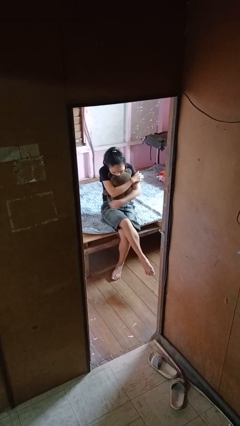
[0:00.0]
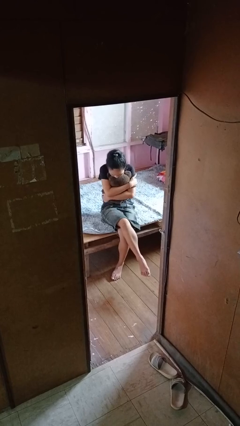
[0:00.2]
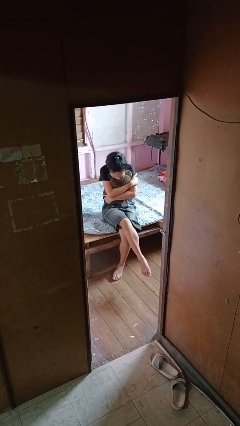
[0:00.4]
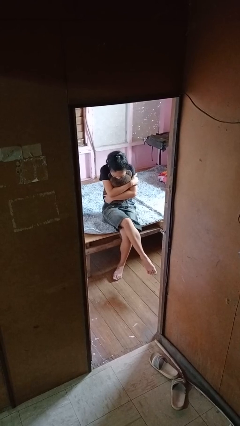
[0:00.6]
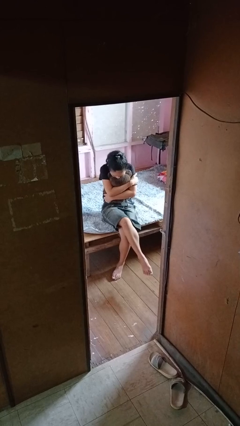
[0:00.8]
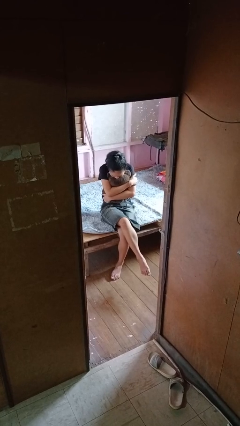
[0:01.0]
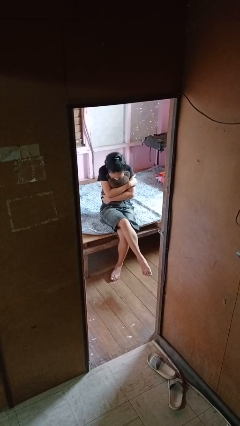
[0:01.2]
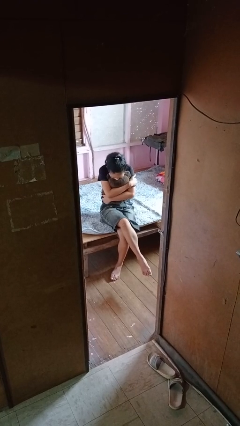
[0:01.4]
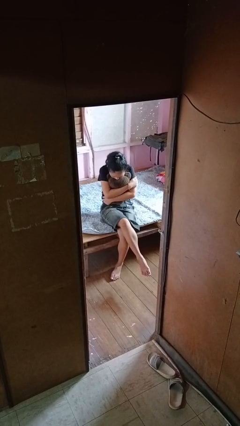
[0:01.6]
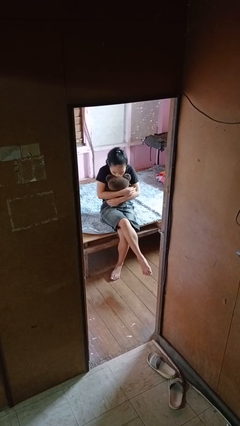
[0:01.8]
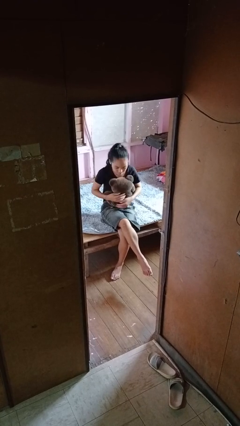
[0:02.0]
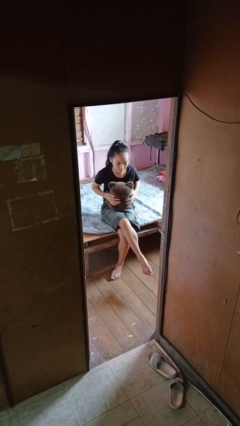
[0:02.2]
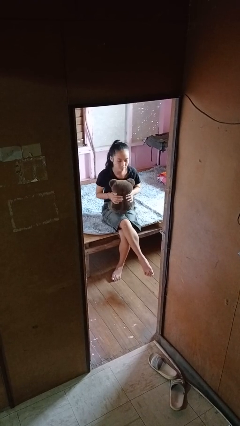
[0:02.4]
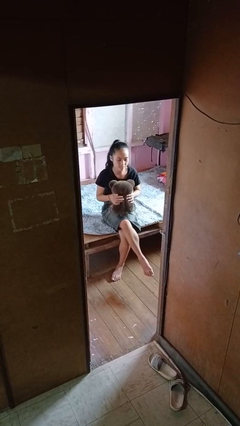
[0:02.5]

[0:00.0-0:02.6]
person hugs stuffed animal

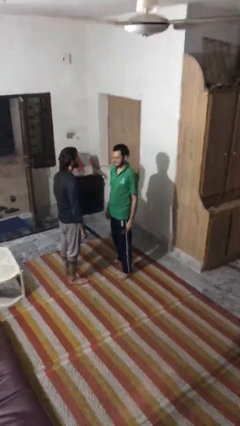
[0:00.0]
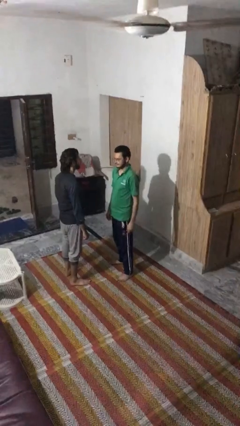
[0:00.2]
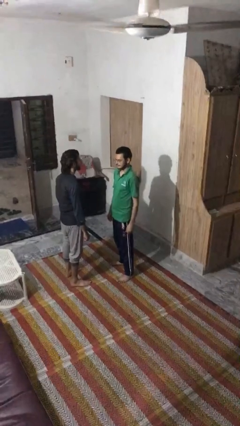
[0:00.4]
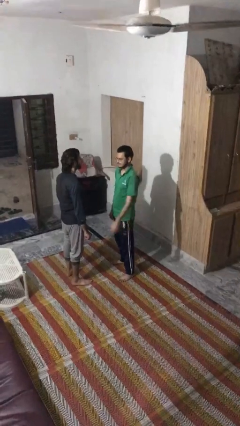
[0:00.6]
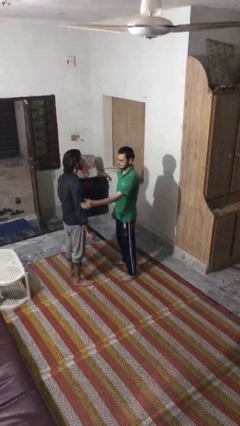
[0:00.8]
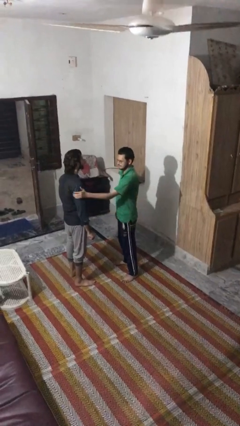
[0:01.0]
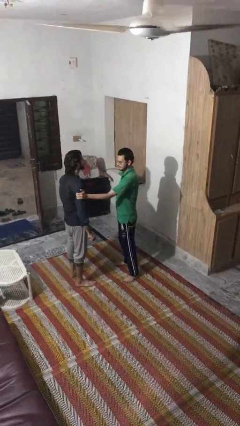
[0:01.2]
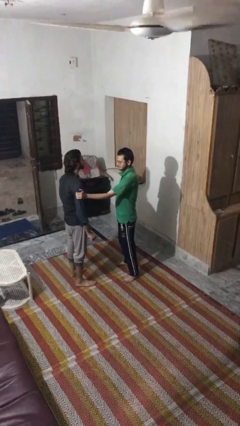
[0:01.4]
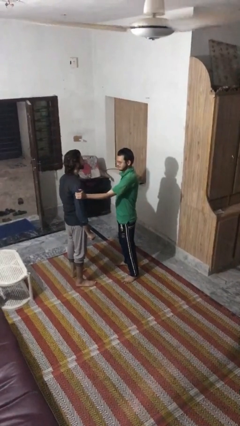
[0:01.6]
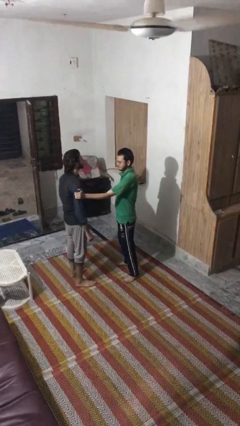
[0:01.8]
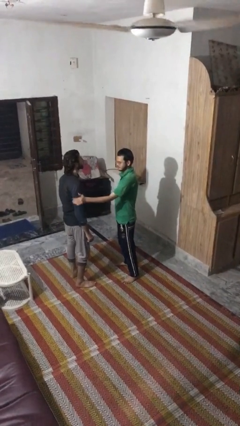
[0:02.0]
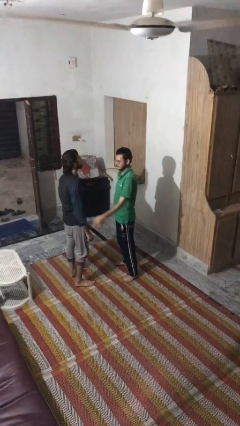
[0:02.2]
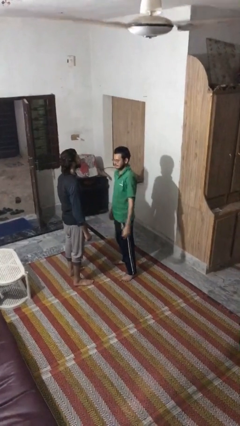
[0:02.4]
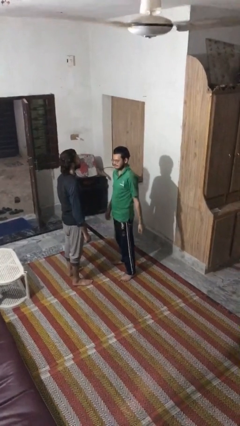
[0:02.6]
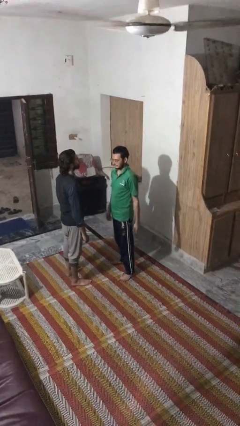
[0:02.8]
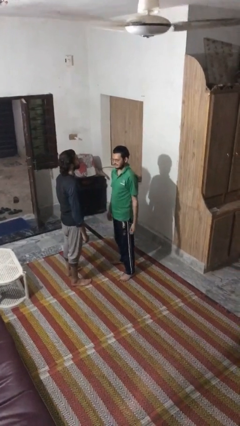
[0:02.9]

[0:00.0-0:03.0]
person grabs person by bicep

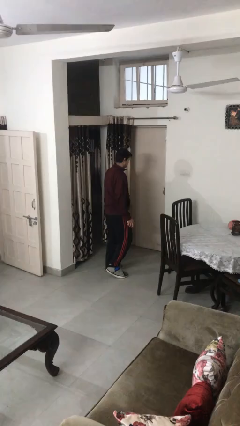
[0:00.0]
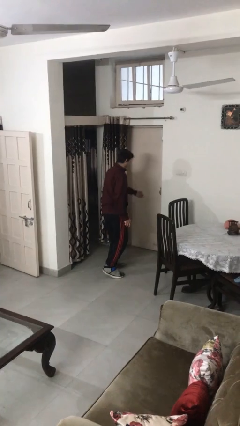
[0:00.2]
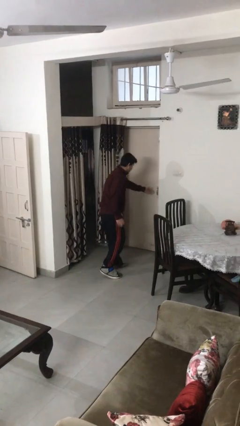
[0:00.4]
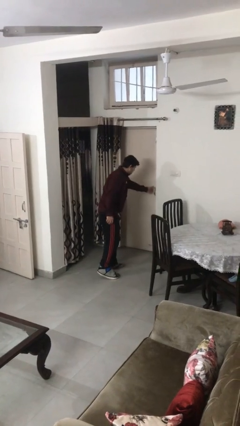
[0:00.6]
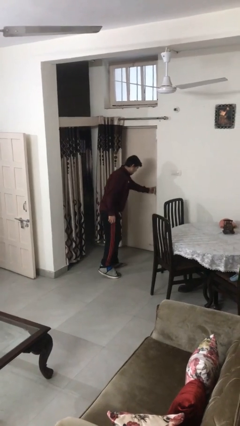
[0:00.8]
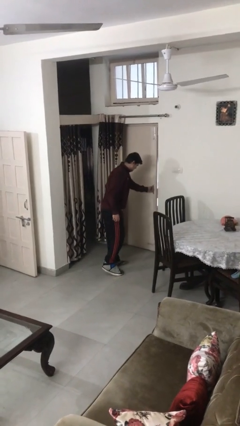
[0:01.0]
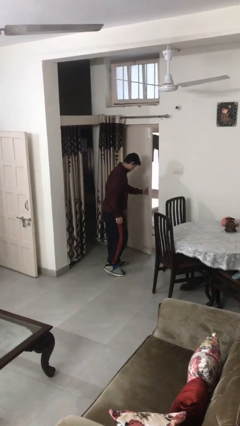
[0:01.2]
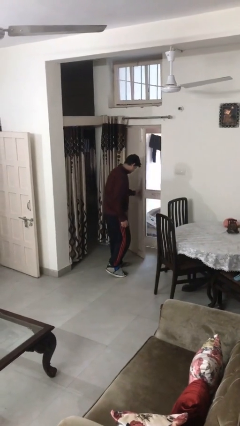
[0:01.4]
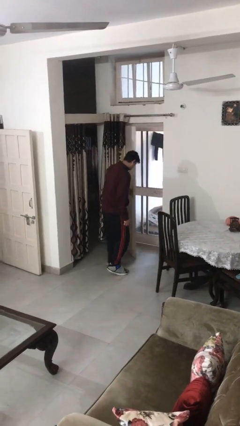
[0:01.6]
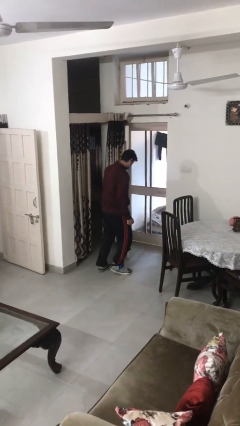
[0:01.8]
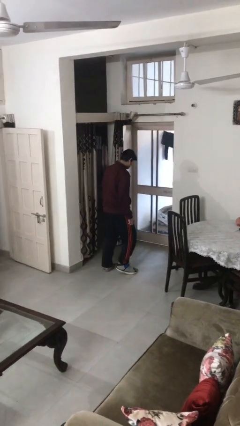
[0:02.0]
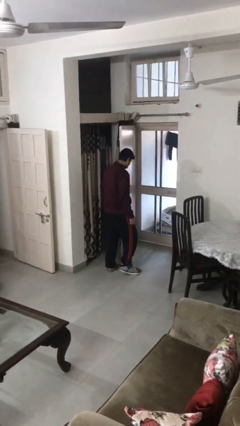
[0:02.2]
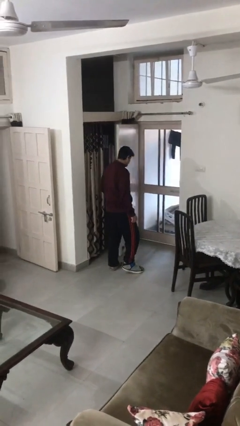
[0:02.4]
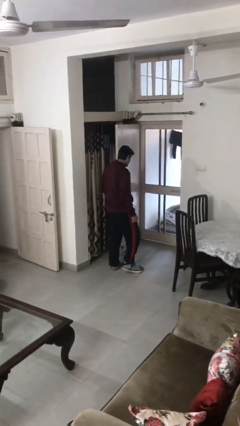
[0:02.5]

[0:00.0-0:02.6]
person opens facility door

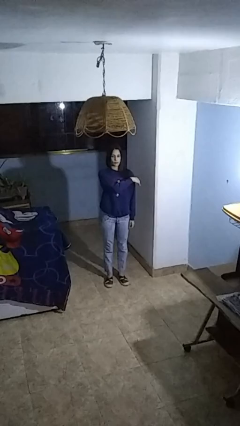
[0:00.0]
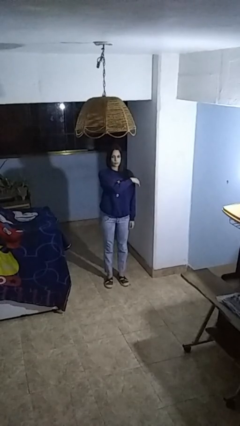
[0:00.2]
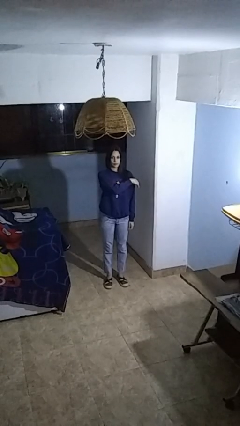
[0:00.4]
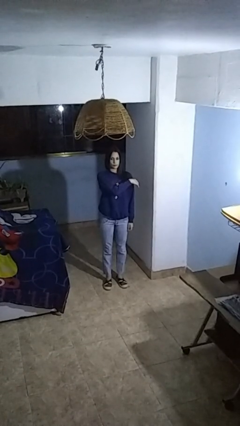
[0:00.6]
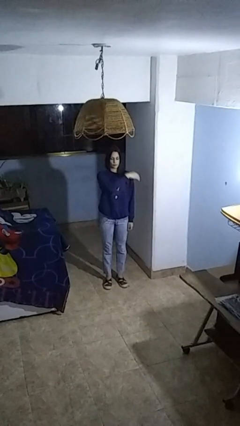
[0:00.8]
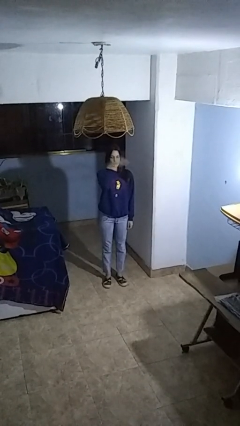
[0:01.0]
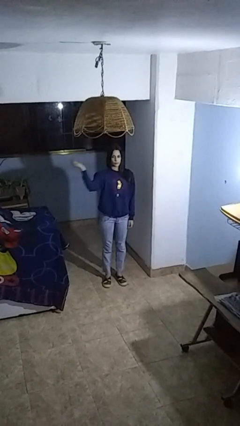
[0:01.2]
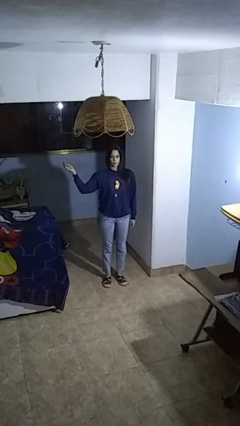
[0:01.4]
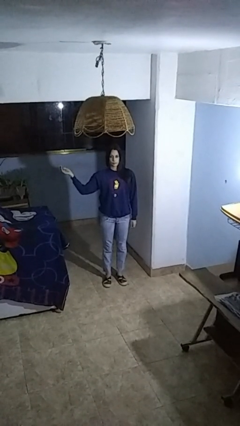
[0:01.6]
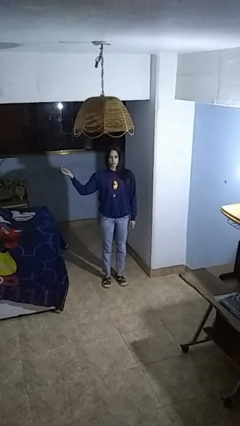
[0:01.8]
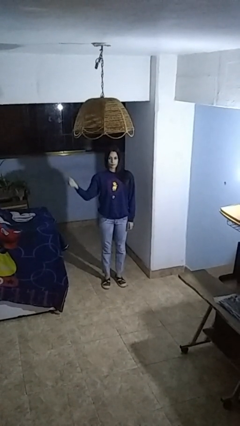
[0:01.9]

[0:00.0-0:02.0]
person gestures swipe right

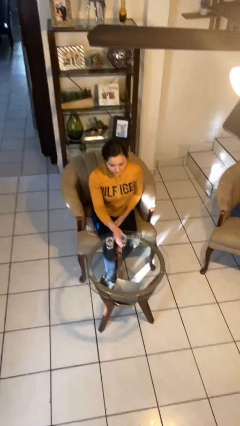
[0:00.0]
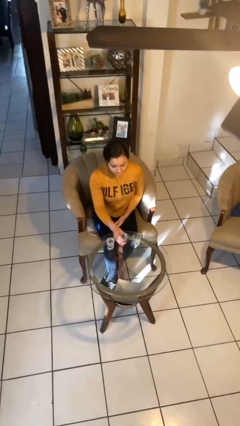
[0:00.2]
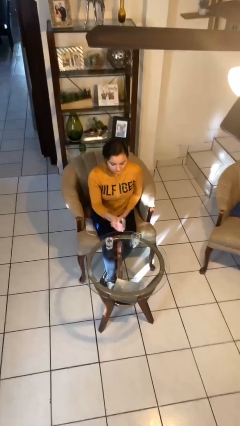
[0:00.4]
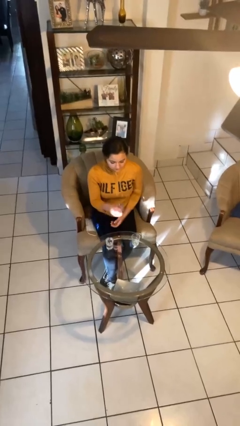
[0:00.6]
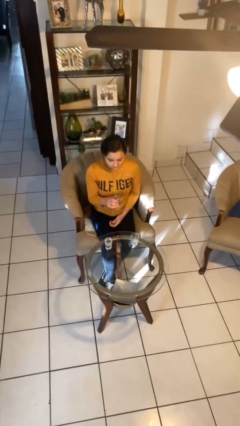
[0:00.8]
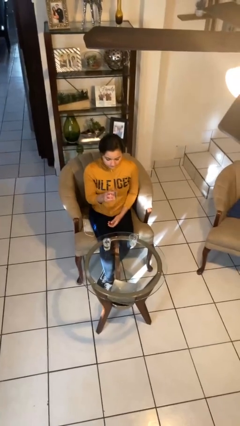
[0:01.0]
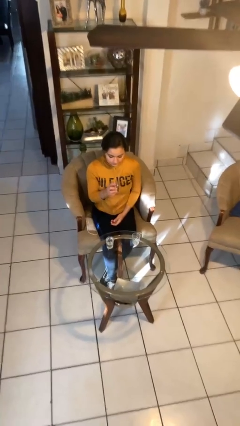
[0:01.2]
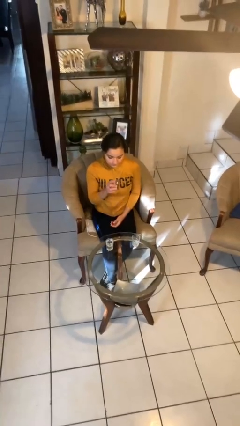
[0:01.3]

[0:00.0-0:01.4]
person picks up object from table

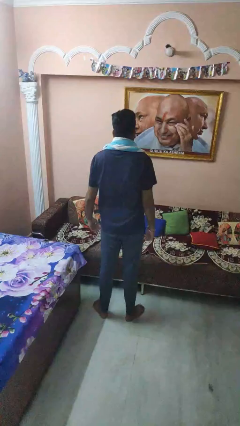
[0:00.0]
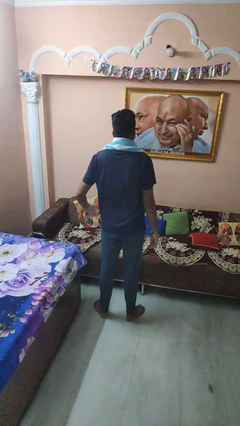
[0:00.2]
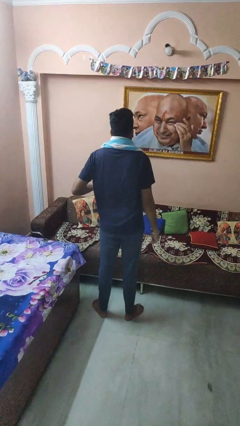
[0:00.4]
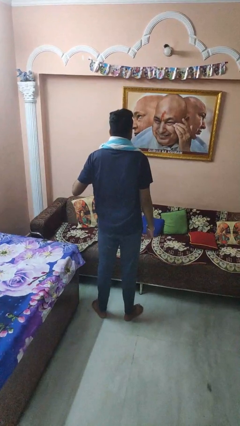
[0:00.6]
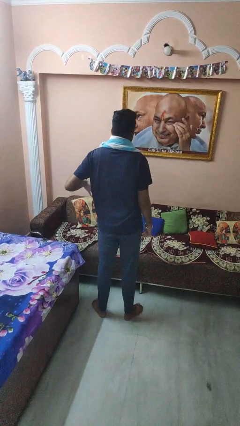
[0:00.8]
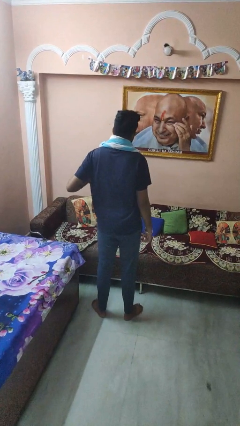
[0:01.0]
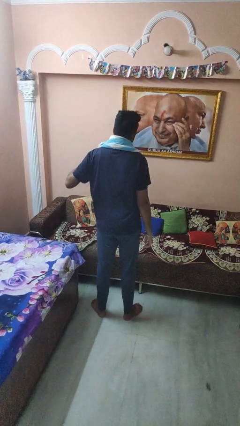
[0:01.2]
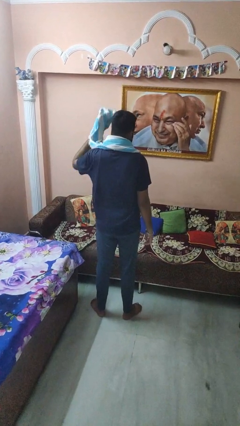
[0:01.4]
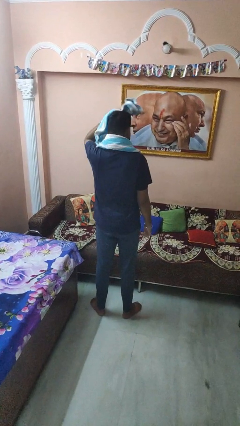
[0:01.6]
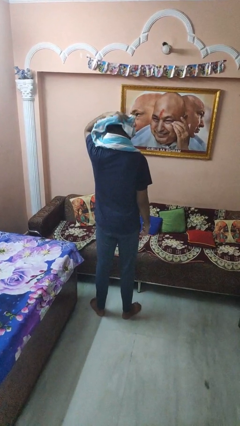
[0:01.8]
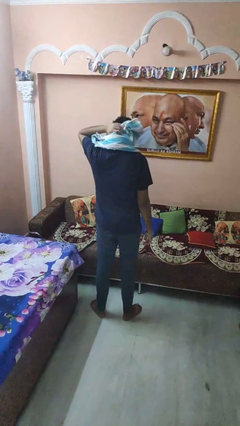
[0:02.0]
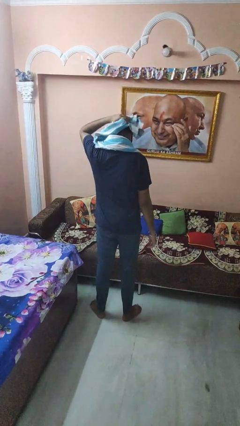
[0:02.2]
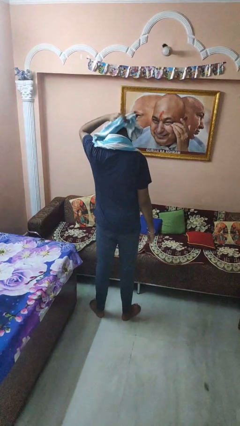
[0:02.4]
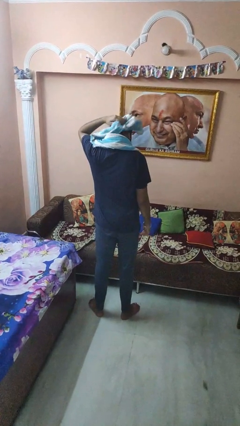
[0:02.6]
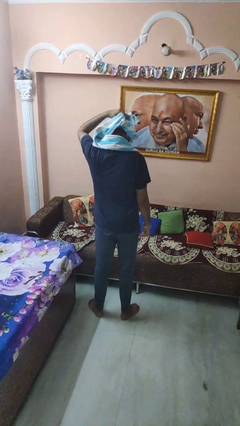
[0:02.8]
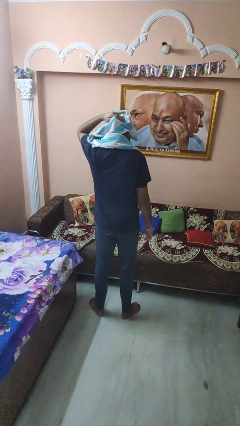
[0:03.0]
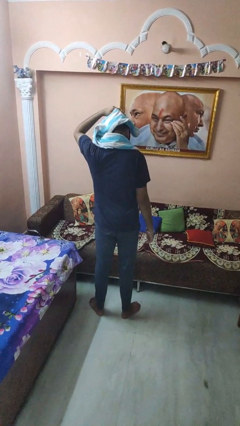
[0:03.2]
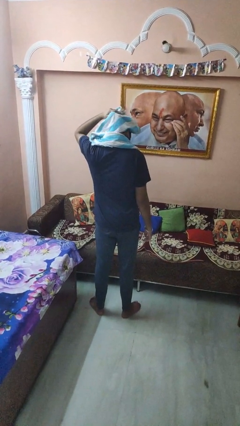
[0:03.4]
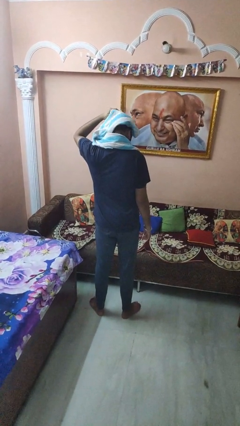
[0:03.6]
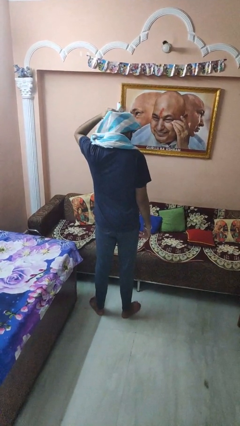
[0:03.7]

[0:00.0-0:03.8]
person dries hair with towel

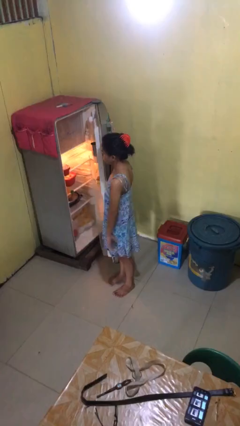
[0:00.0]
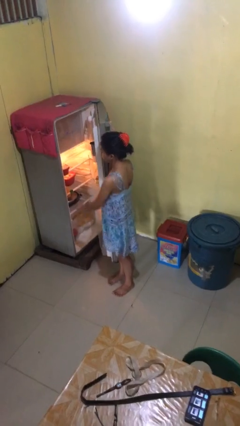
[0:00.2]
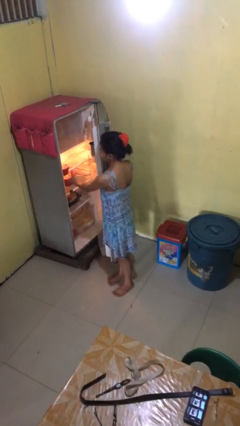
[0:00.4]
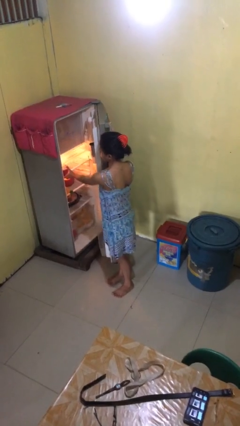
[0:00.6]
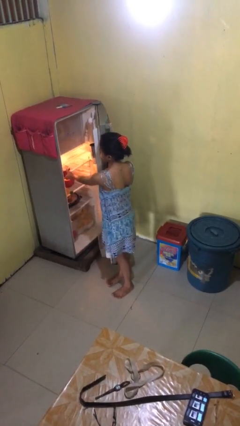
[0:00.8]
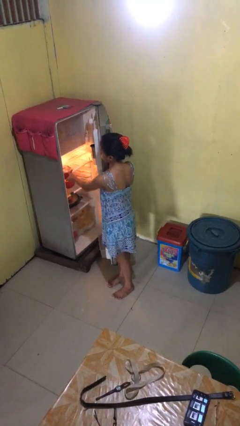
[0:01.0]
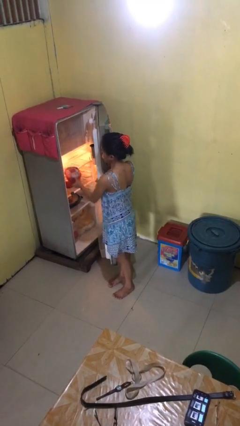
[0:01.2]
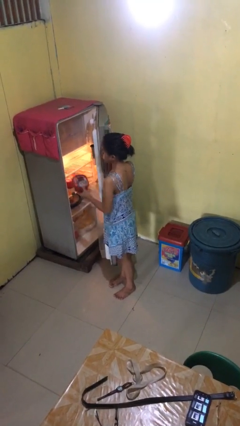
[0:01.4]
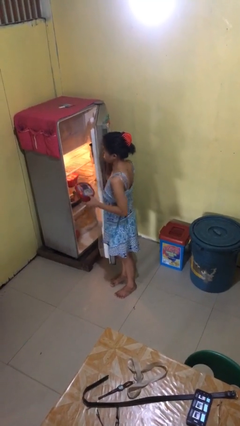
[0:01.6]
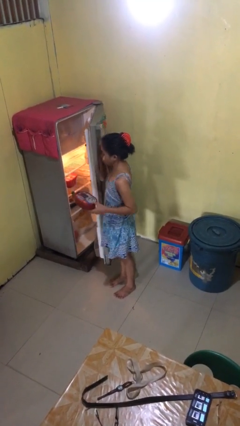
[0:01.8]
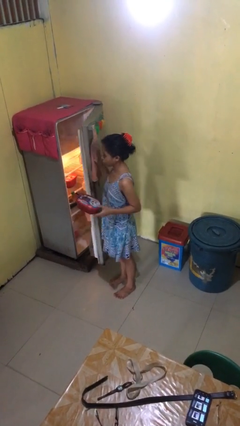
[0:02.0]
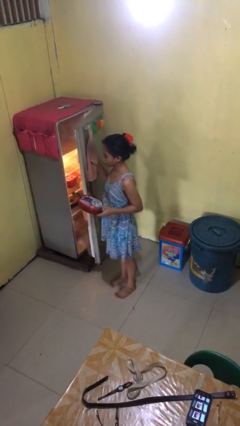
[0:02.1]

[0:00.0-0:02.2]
person takes object from refrigerator
